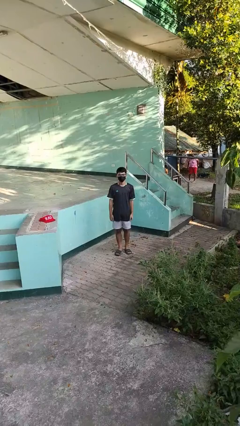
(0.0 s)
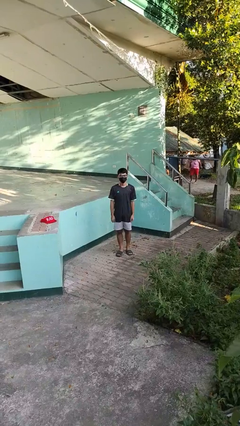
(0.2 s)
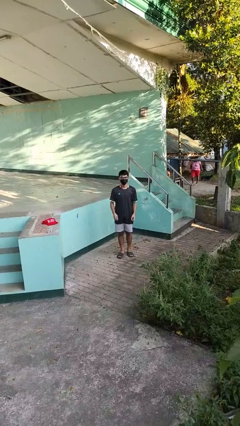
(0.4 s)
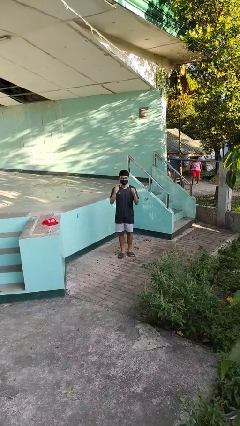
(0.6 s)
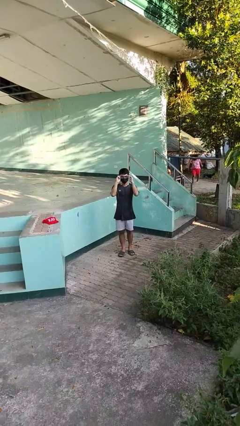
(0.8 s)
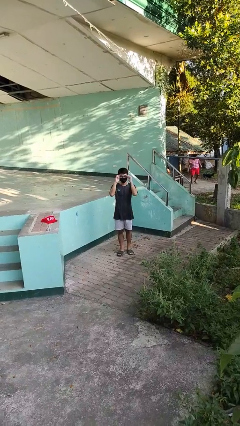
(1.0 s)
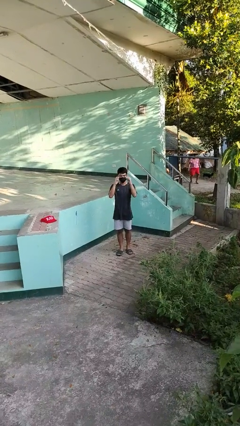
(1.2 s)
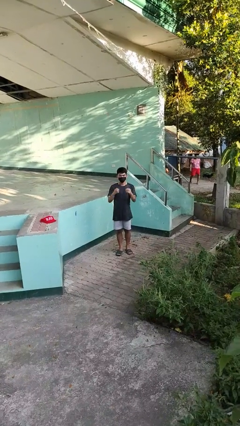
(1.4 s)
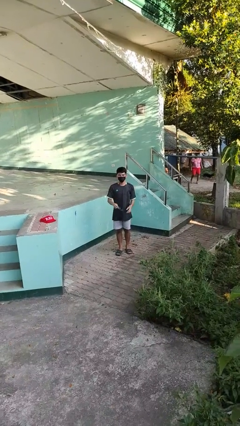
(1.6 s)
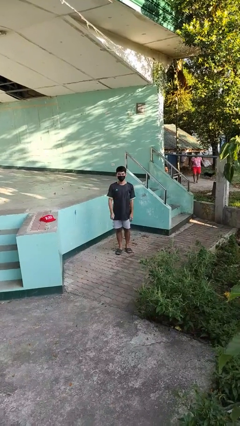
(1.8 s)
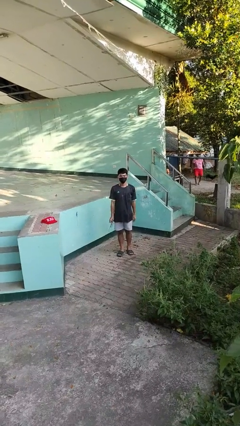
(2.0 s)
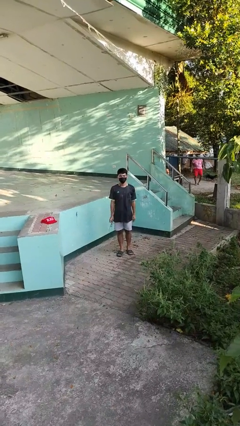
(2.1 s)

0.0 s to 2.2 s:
person takes off glasses

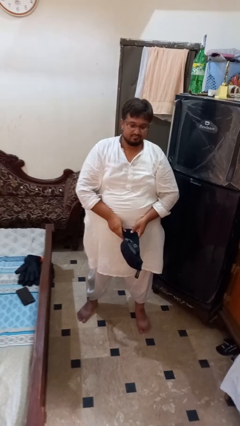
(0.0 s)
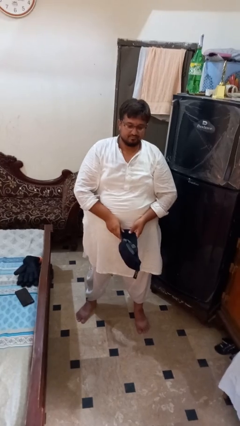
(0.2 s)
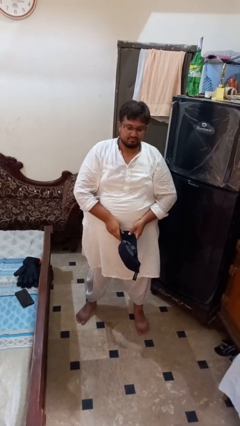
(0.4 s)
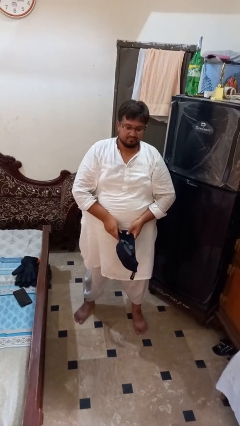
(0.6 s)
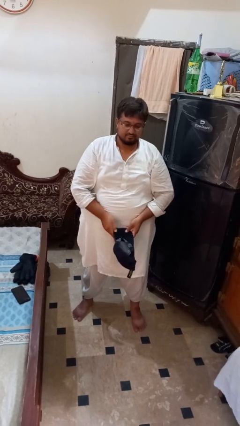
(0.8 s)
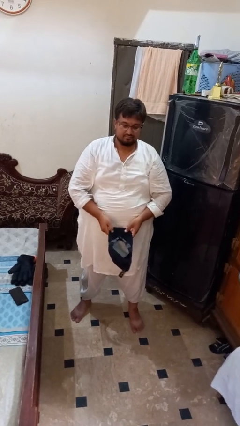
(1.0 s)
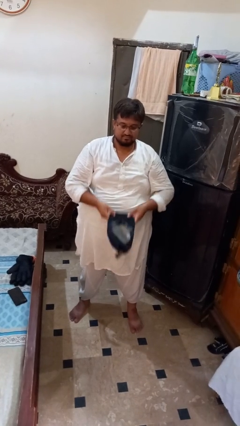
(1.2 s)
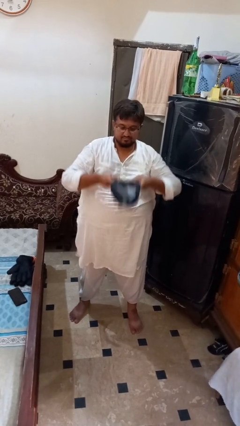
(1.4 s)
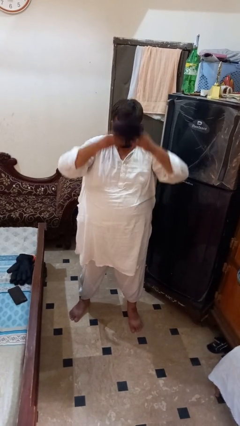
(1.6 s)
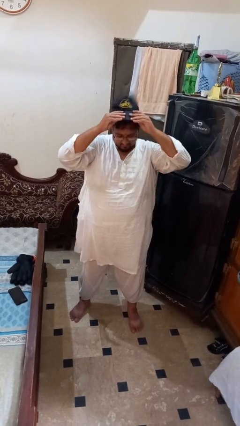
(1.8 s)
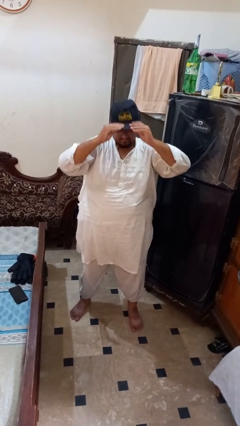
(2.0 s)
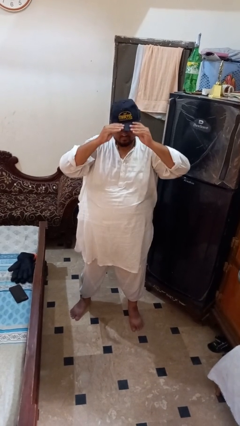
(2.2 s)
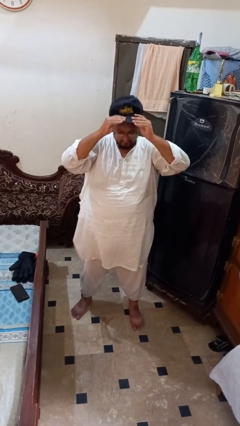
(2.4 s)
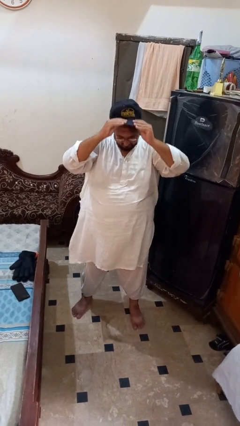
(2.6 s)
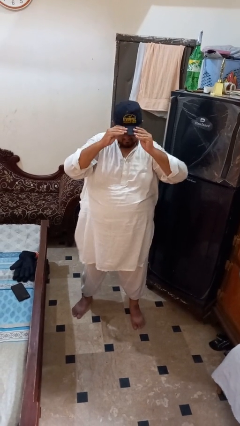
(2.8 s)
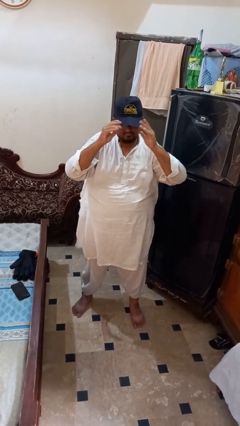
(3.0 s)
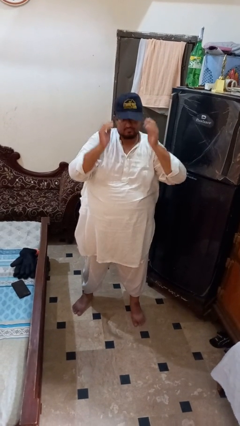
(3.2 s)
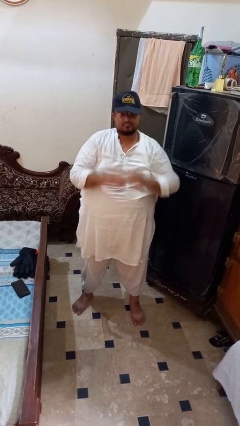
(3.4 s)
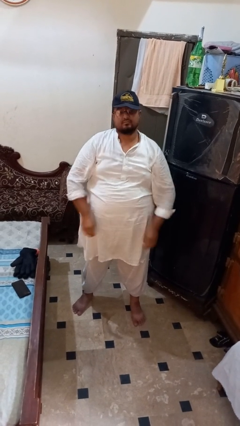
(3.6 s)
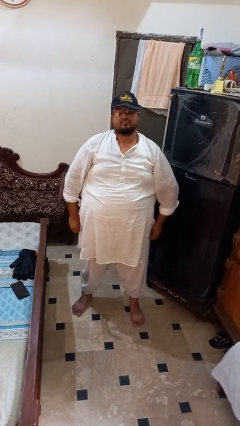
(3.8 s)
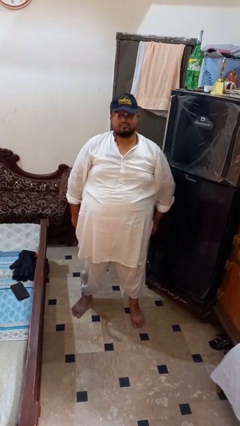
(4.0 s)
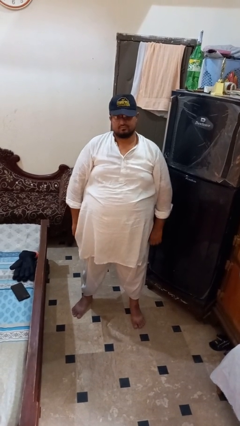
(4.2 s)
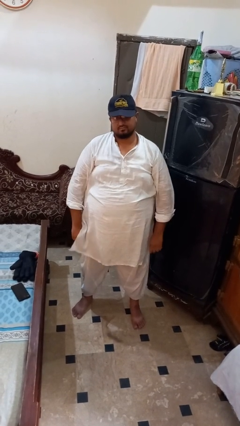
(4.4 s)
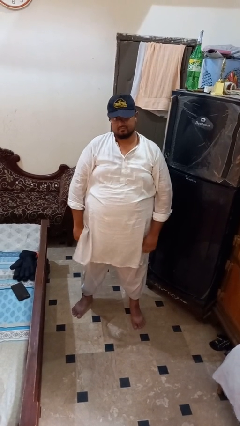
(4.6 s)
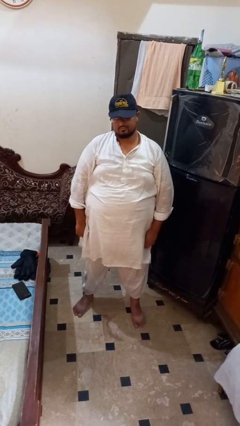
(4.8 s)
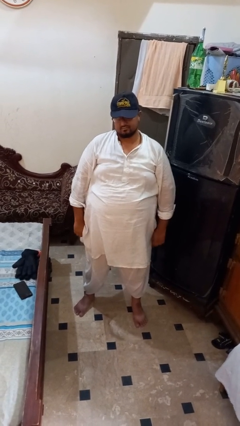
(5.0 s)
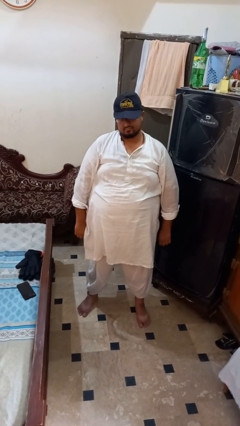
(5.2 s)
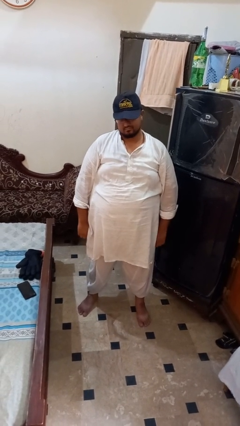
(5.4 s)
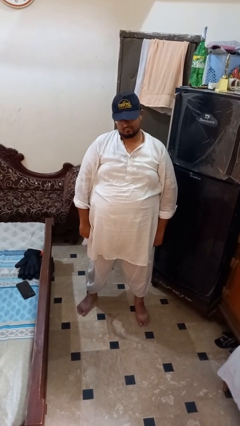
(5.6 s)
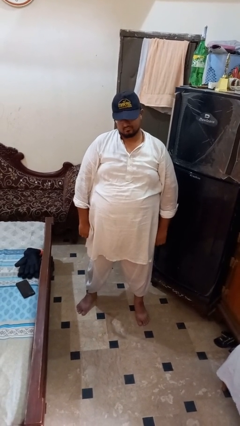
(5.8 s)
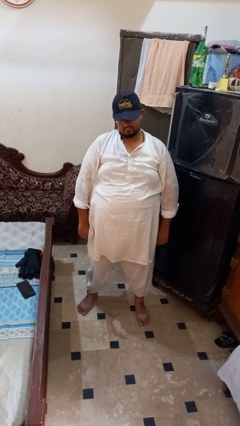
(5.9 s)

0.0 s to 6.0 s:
person puts on hat

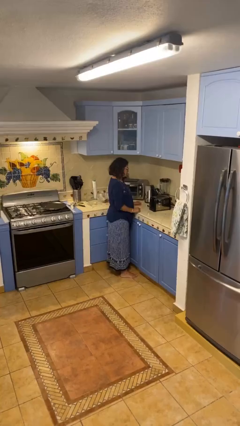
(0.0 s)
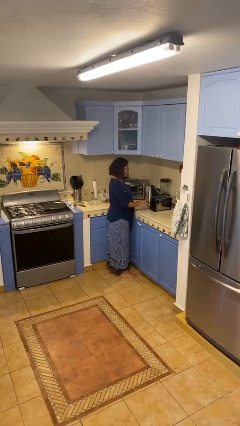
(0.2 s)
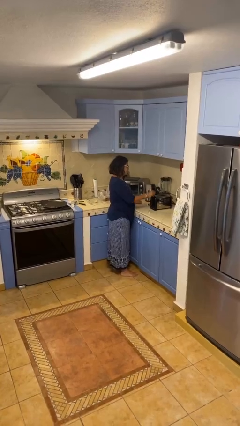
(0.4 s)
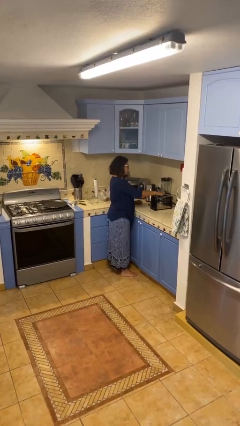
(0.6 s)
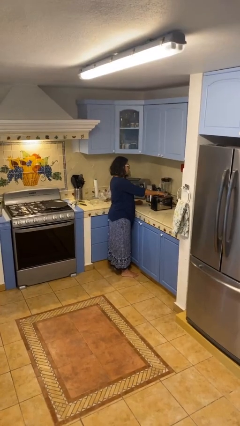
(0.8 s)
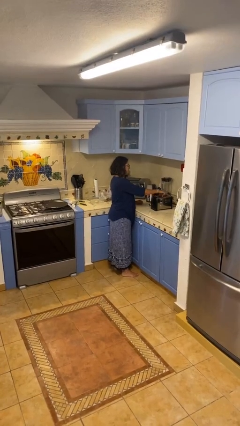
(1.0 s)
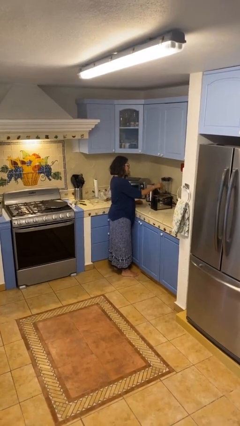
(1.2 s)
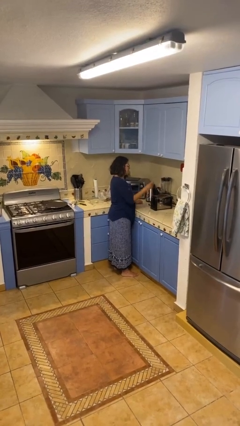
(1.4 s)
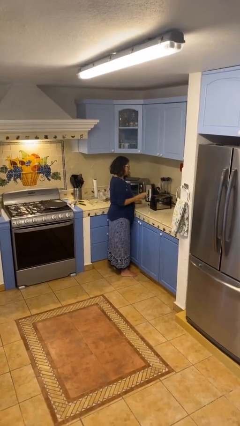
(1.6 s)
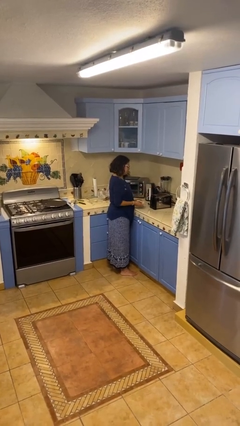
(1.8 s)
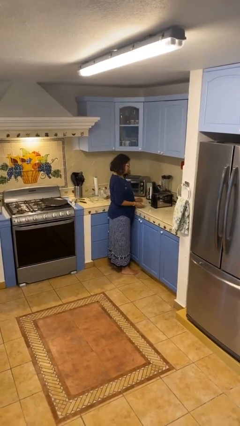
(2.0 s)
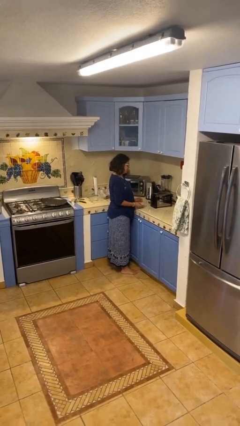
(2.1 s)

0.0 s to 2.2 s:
person takes object from toaster

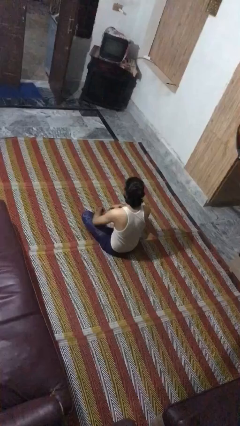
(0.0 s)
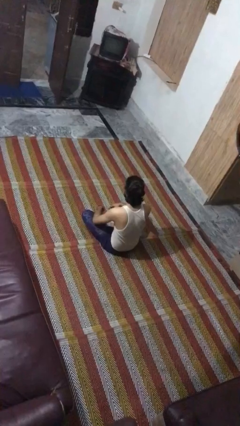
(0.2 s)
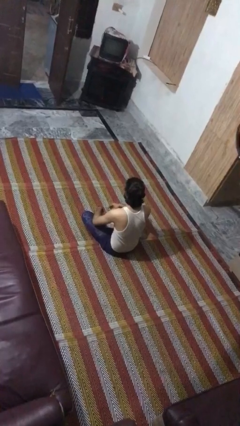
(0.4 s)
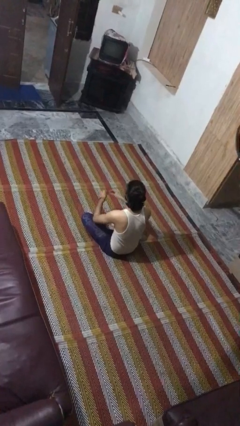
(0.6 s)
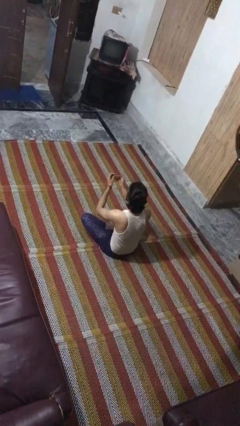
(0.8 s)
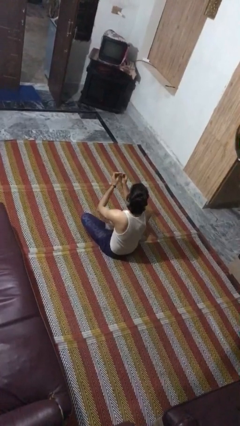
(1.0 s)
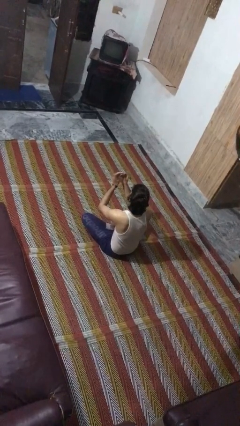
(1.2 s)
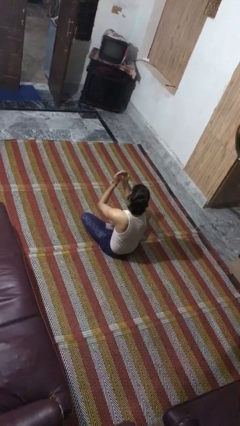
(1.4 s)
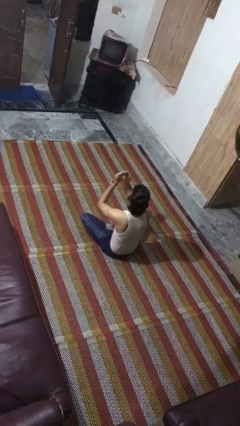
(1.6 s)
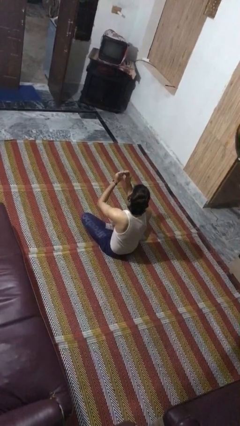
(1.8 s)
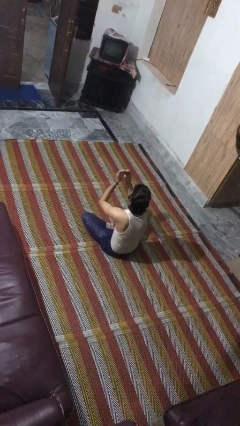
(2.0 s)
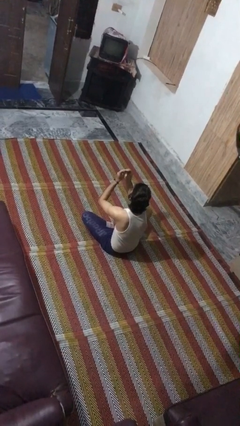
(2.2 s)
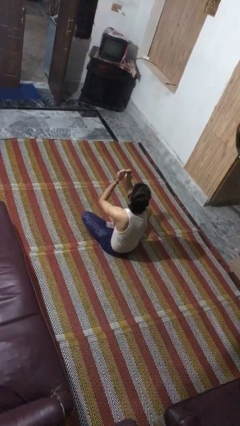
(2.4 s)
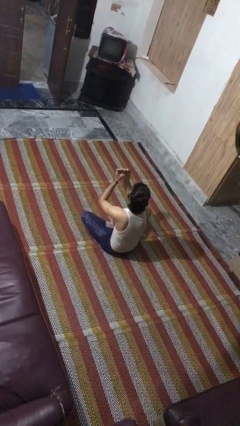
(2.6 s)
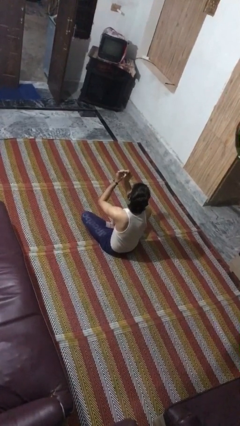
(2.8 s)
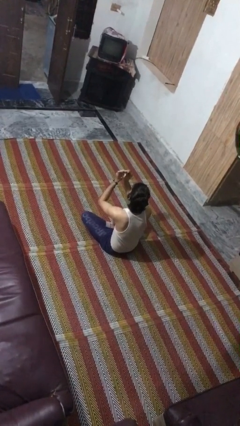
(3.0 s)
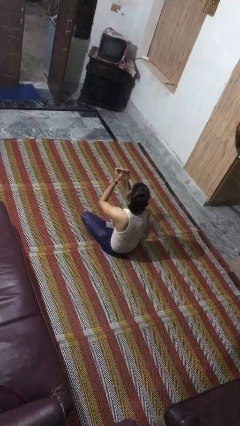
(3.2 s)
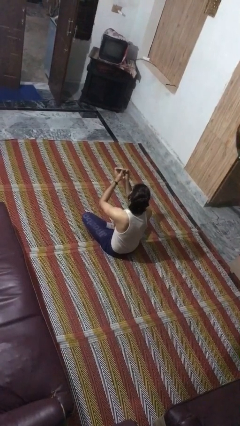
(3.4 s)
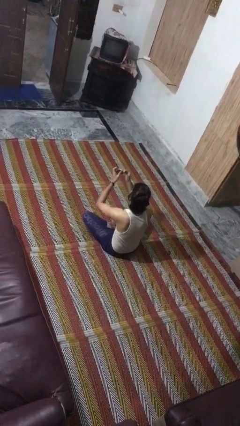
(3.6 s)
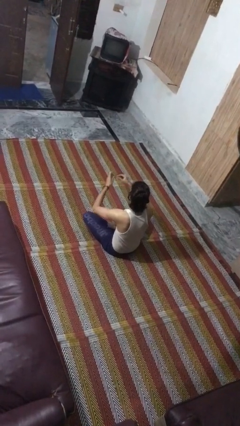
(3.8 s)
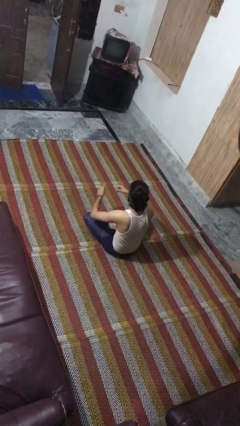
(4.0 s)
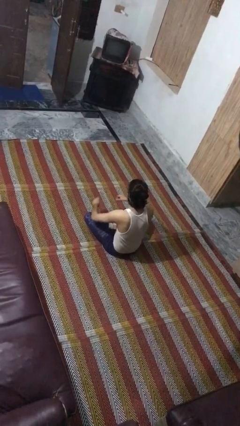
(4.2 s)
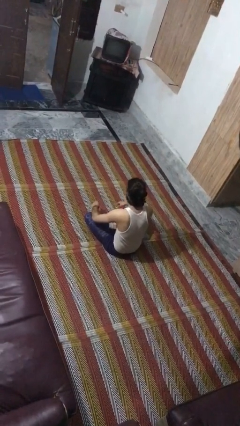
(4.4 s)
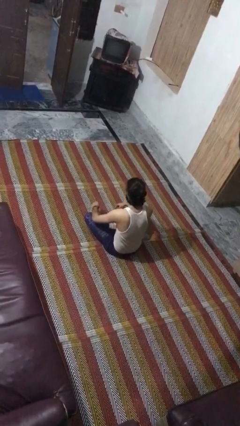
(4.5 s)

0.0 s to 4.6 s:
person clips fingernails

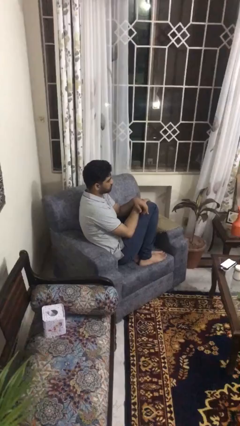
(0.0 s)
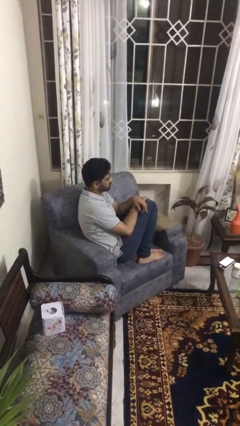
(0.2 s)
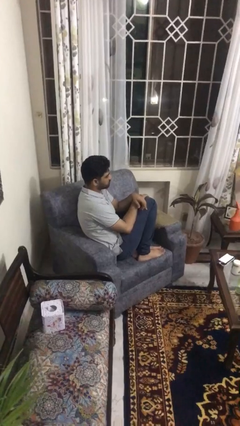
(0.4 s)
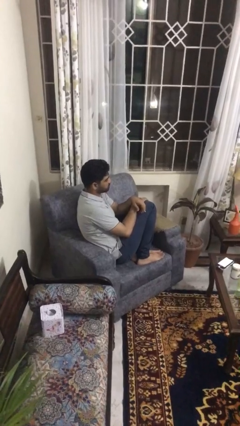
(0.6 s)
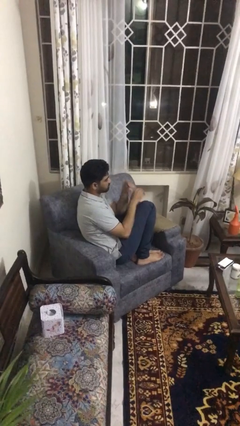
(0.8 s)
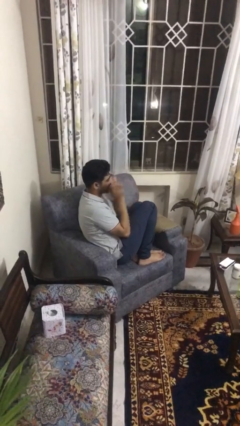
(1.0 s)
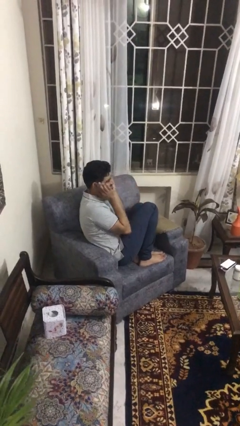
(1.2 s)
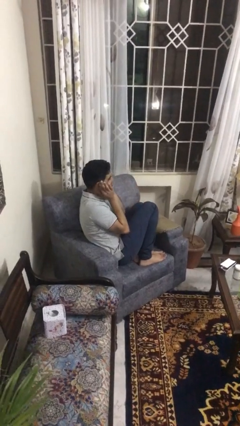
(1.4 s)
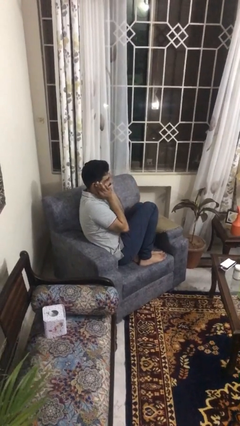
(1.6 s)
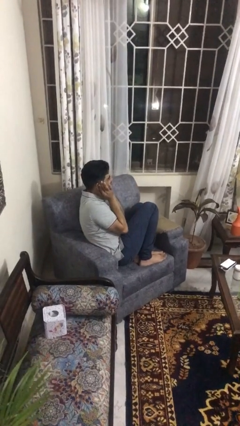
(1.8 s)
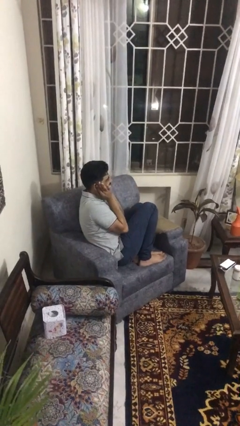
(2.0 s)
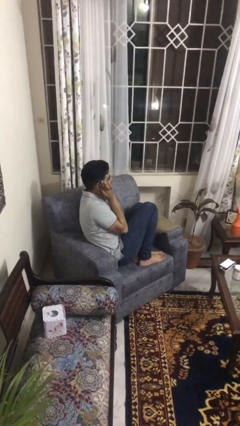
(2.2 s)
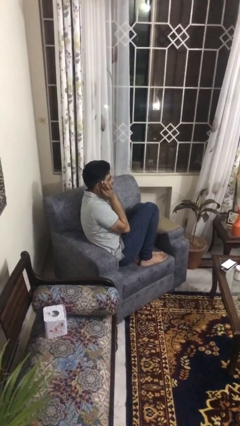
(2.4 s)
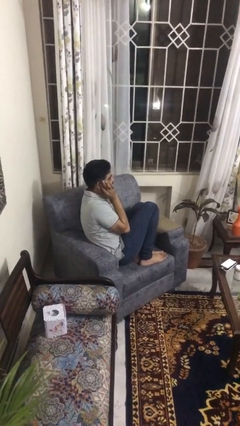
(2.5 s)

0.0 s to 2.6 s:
person puts fingers in ear

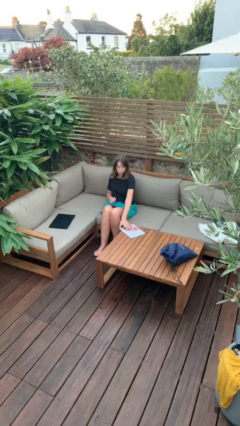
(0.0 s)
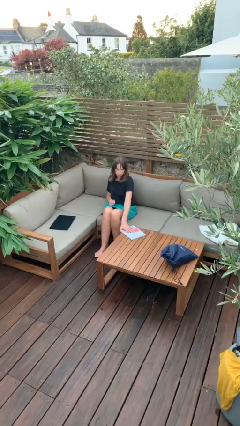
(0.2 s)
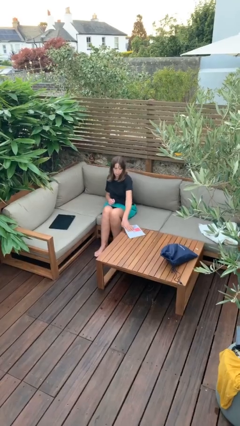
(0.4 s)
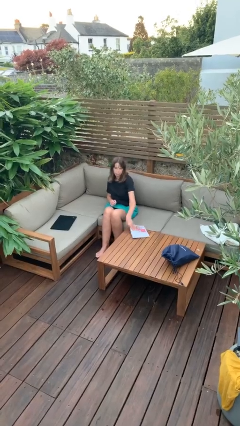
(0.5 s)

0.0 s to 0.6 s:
person picks up object from table
